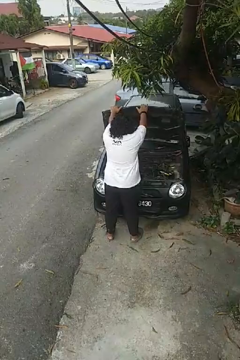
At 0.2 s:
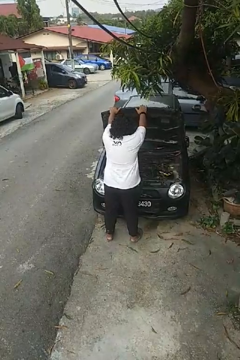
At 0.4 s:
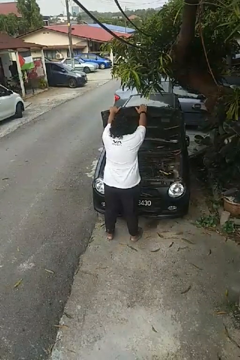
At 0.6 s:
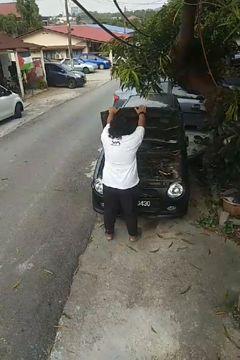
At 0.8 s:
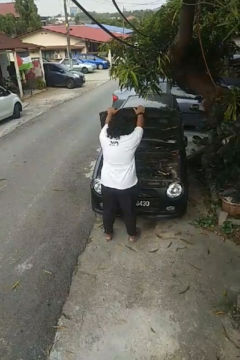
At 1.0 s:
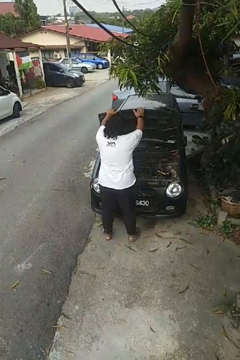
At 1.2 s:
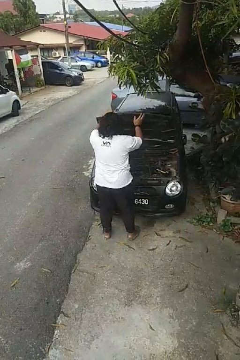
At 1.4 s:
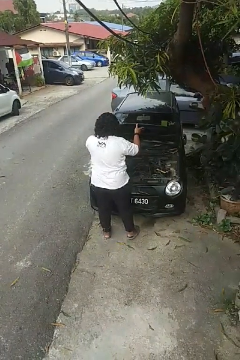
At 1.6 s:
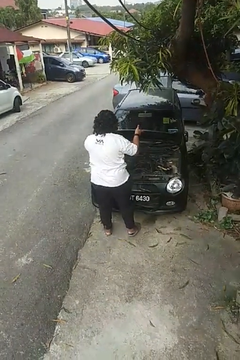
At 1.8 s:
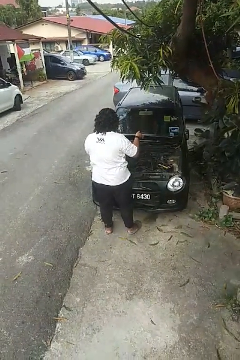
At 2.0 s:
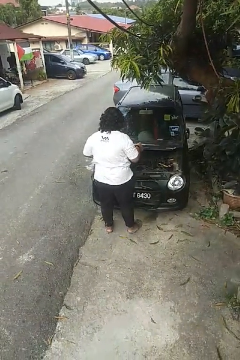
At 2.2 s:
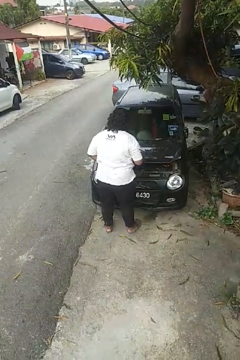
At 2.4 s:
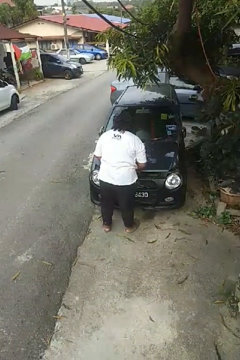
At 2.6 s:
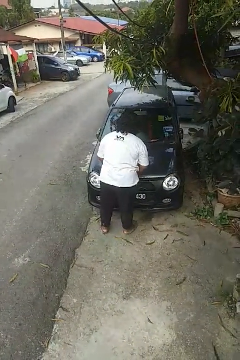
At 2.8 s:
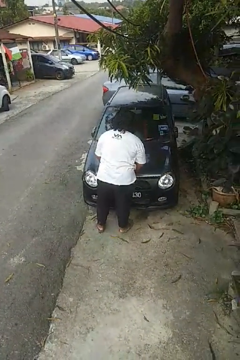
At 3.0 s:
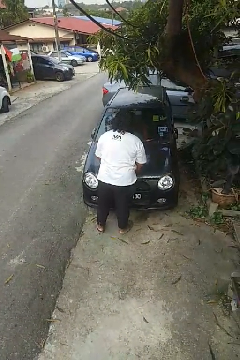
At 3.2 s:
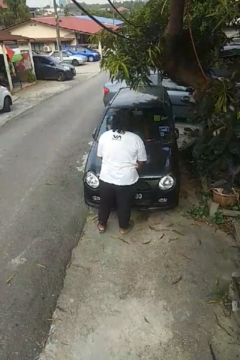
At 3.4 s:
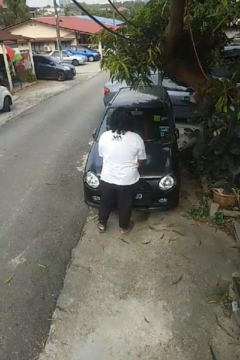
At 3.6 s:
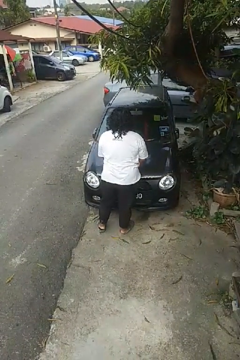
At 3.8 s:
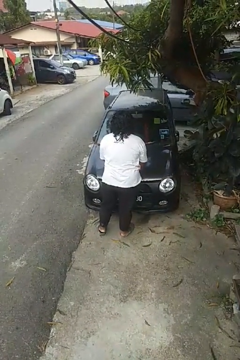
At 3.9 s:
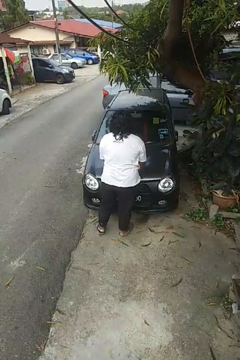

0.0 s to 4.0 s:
person closes car hood

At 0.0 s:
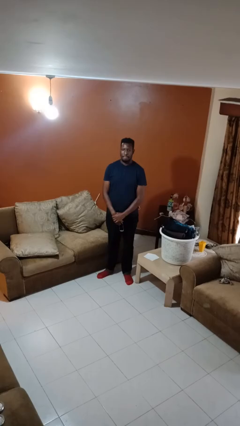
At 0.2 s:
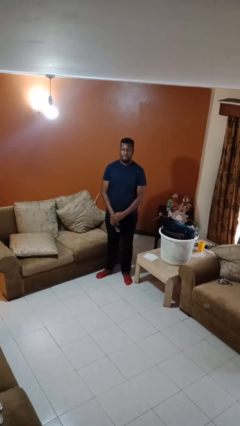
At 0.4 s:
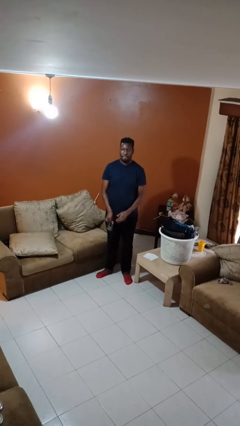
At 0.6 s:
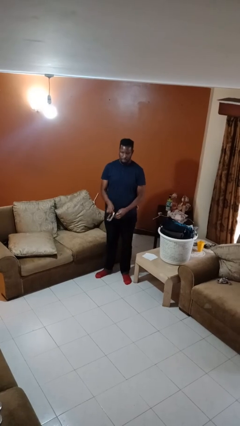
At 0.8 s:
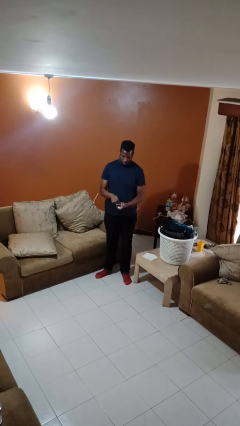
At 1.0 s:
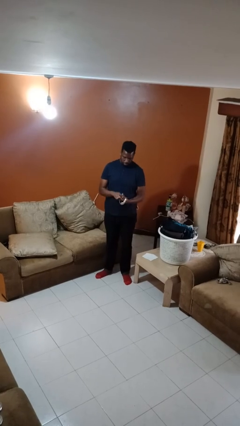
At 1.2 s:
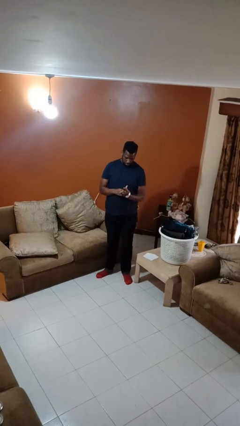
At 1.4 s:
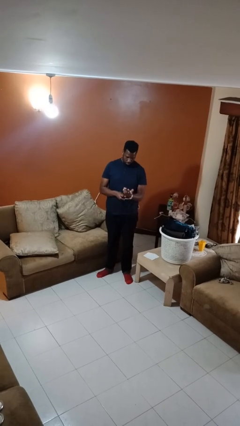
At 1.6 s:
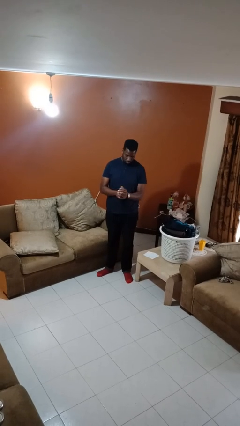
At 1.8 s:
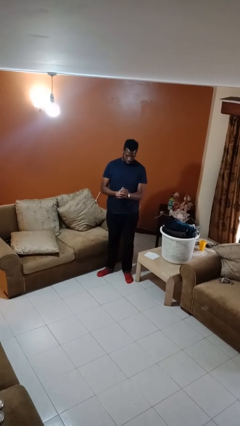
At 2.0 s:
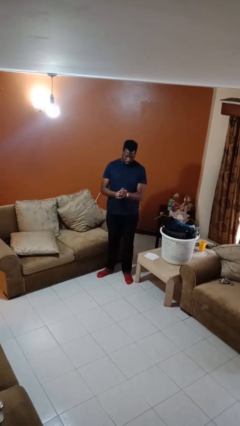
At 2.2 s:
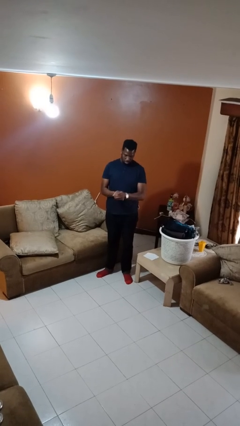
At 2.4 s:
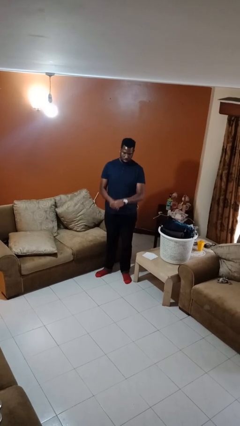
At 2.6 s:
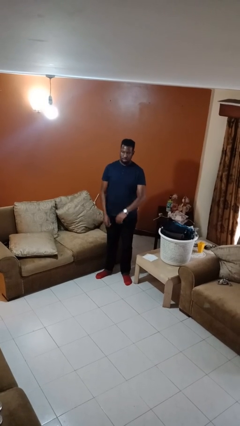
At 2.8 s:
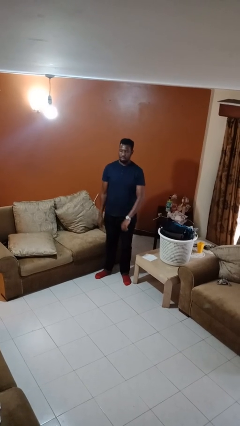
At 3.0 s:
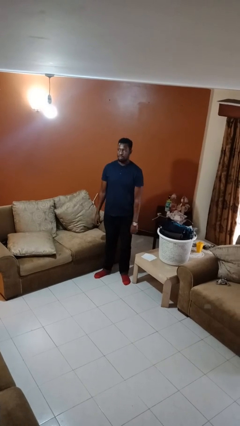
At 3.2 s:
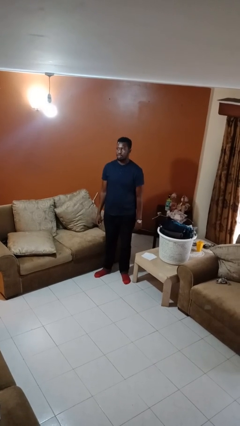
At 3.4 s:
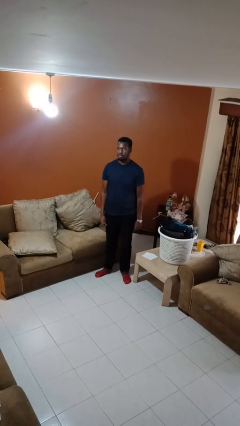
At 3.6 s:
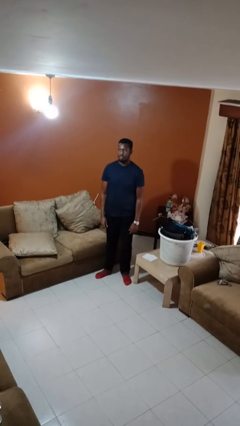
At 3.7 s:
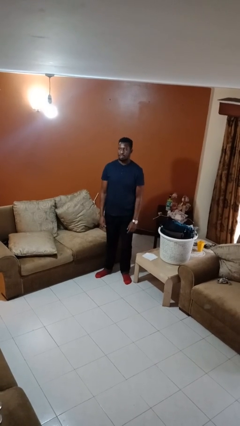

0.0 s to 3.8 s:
person puts on wristwatch

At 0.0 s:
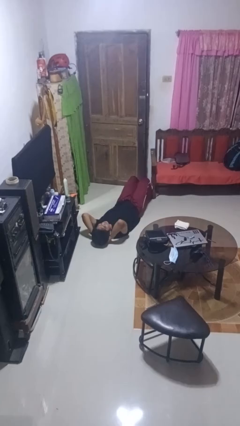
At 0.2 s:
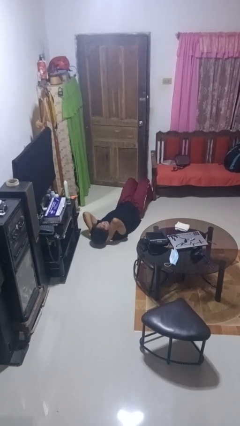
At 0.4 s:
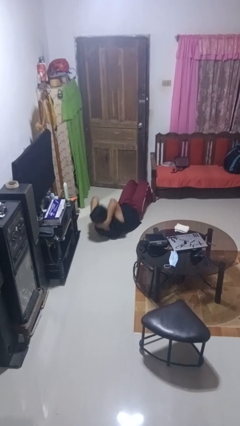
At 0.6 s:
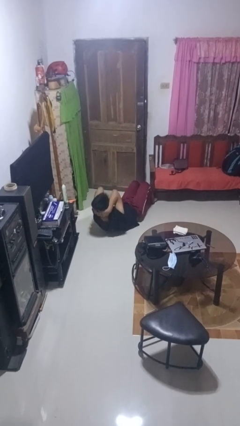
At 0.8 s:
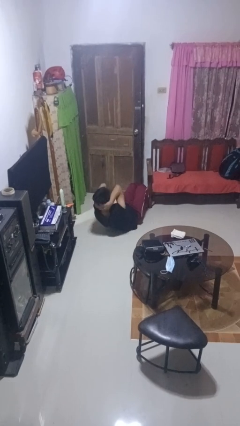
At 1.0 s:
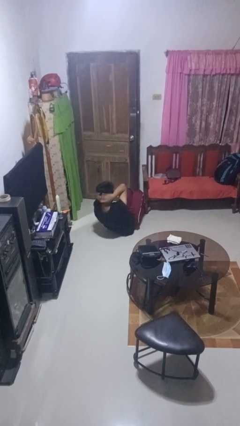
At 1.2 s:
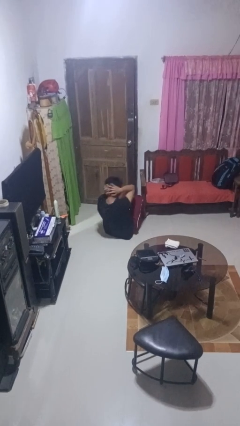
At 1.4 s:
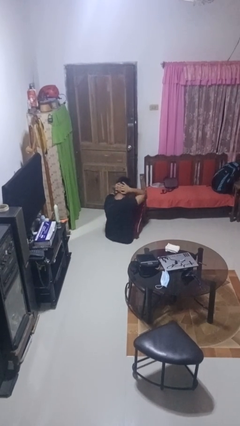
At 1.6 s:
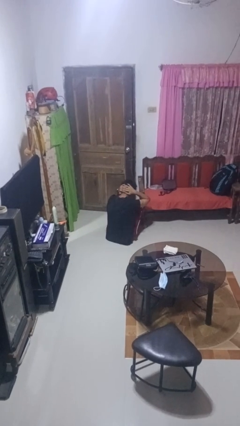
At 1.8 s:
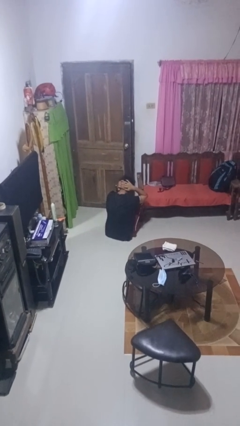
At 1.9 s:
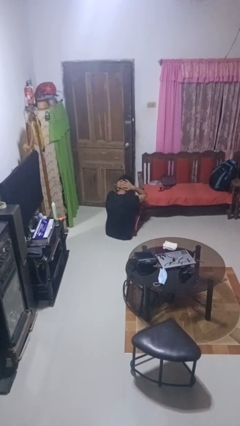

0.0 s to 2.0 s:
person exercises with situp

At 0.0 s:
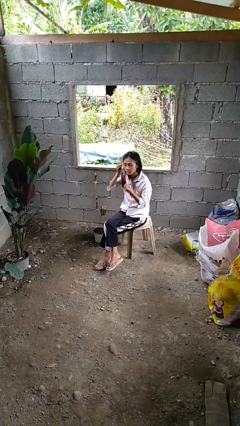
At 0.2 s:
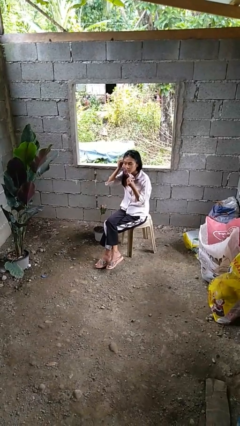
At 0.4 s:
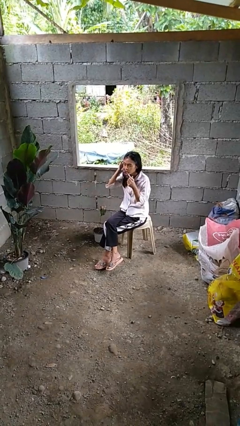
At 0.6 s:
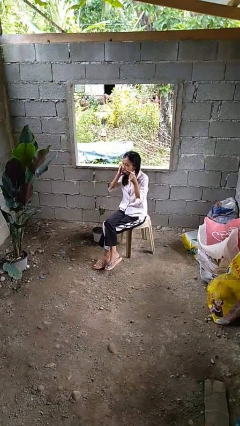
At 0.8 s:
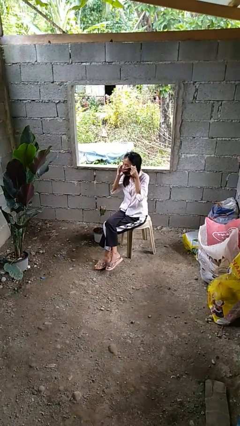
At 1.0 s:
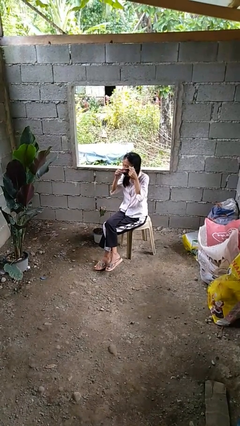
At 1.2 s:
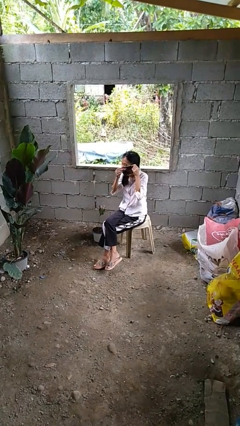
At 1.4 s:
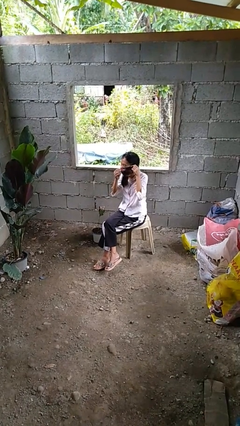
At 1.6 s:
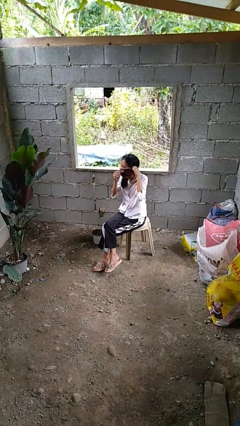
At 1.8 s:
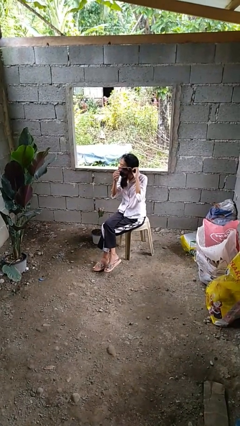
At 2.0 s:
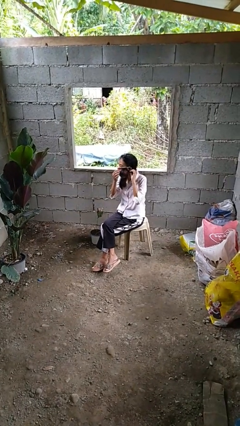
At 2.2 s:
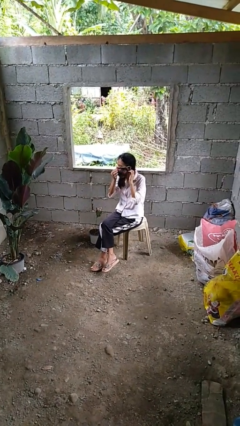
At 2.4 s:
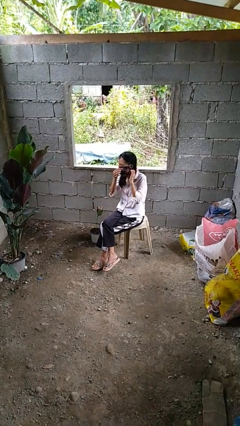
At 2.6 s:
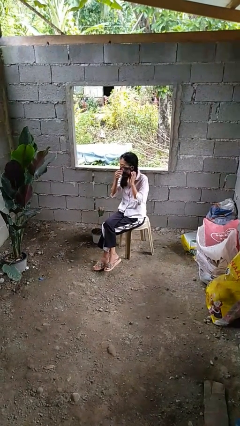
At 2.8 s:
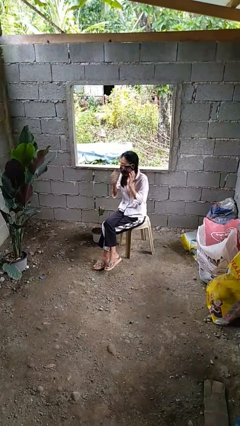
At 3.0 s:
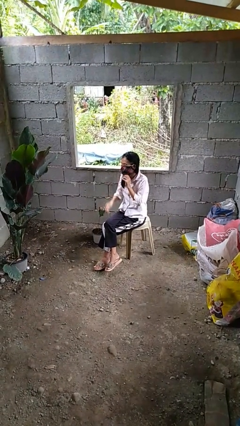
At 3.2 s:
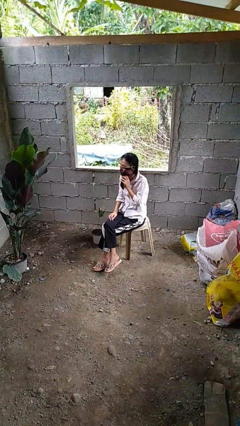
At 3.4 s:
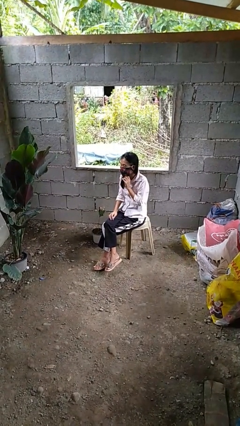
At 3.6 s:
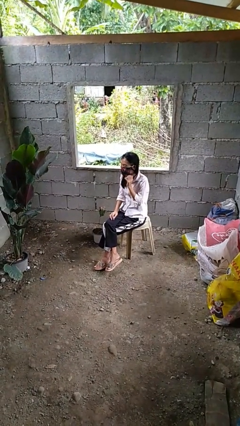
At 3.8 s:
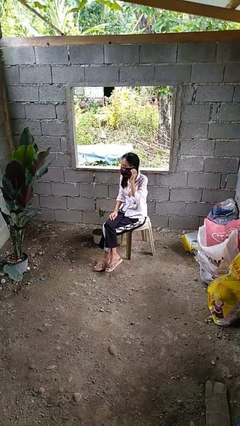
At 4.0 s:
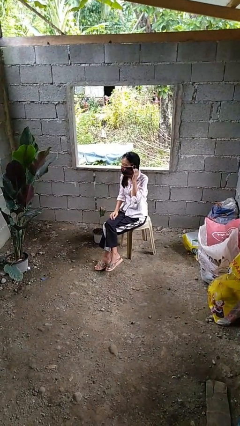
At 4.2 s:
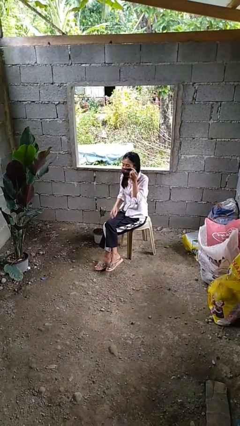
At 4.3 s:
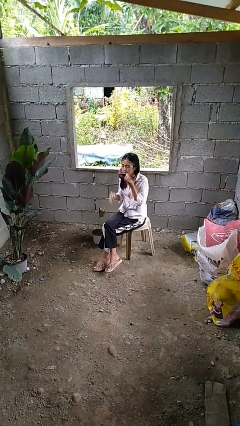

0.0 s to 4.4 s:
person puts on facemask

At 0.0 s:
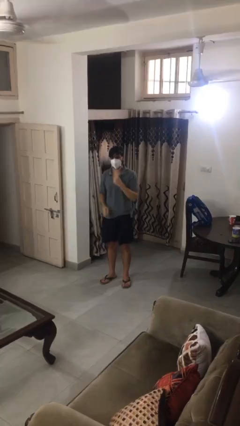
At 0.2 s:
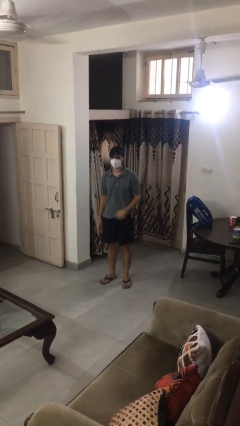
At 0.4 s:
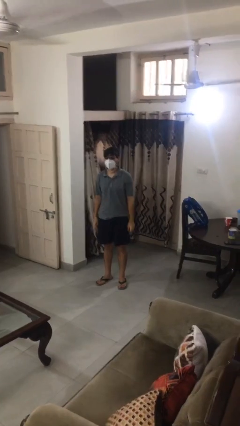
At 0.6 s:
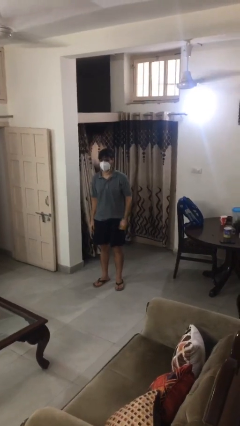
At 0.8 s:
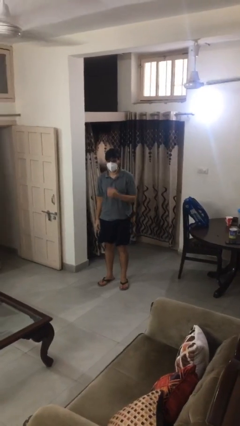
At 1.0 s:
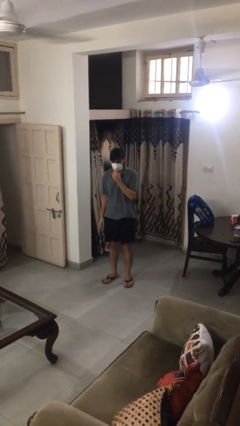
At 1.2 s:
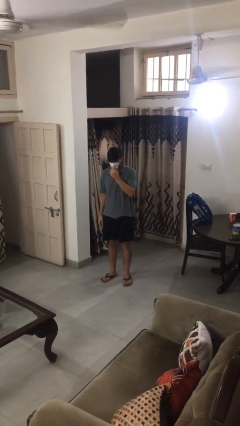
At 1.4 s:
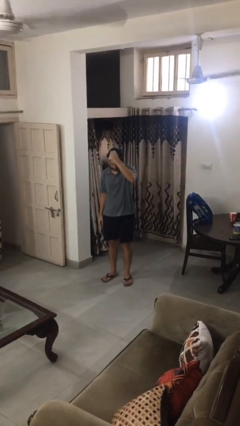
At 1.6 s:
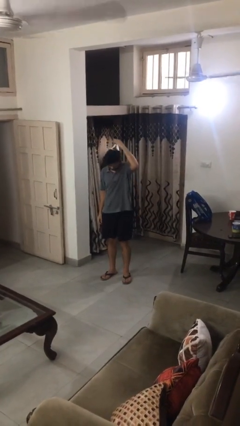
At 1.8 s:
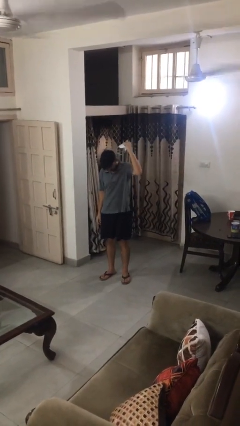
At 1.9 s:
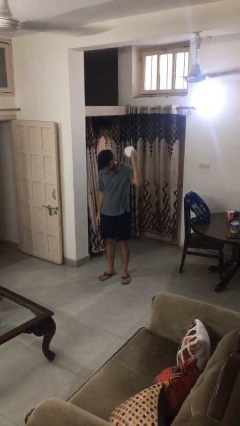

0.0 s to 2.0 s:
person takes off facemask

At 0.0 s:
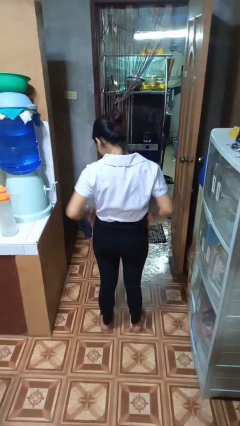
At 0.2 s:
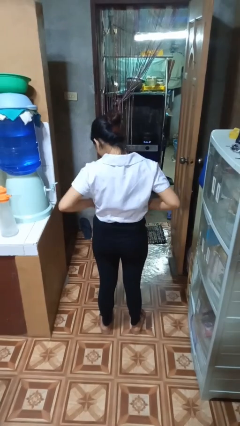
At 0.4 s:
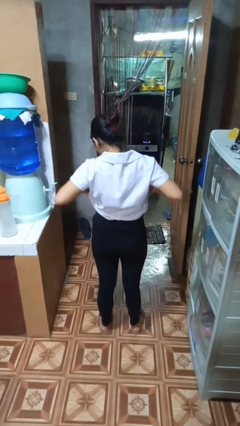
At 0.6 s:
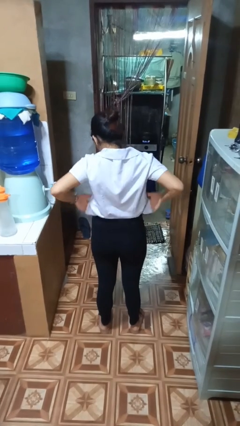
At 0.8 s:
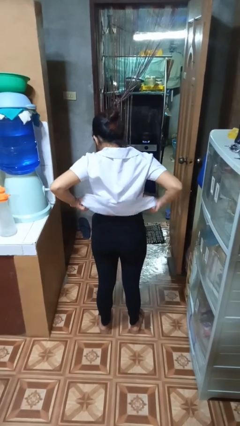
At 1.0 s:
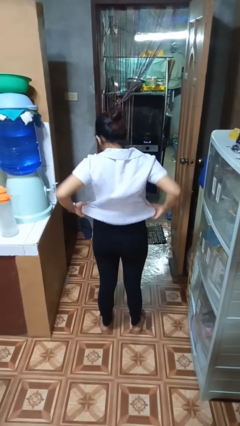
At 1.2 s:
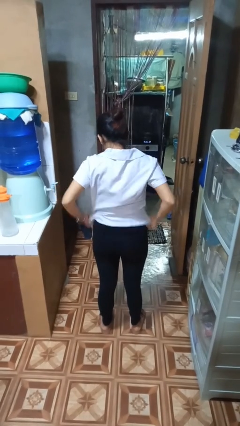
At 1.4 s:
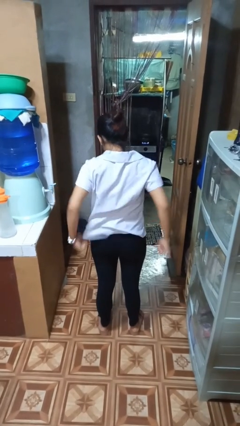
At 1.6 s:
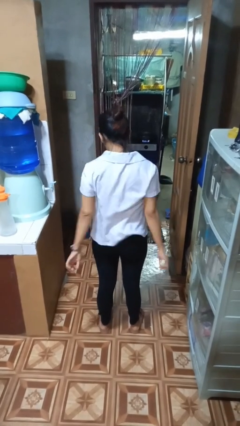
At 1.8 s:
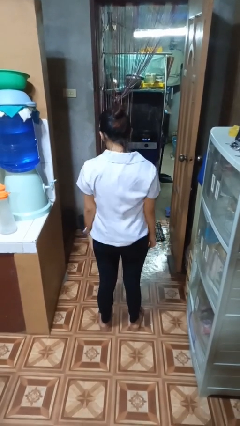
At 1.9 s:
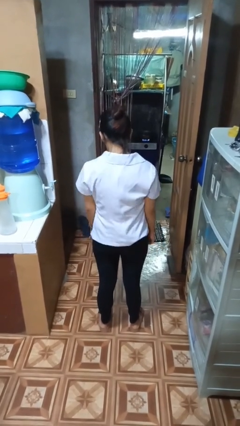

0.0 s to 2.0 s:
person untucks shirt
